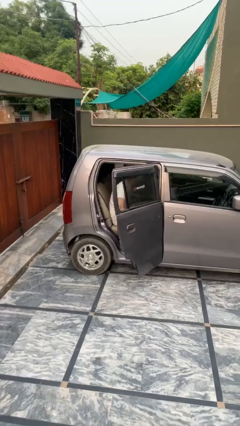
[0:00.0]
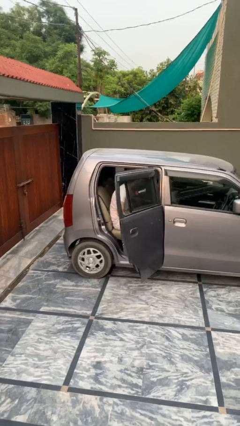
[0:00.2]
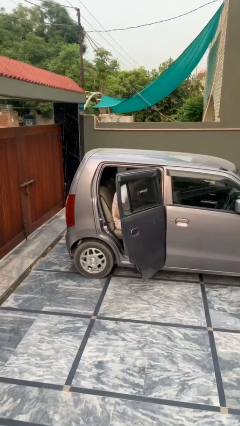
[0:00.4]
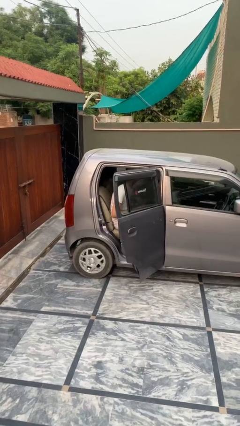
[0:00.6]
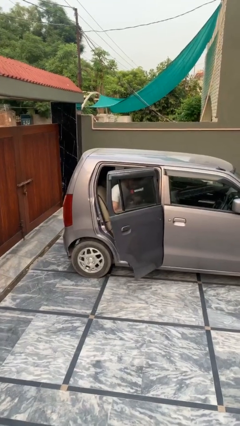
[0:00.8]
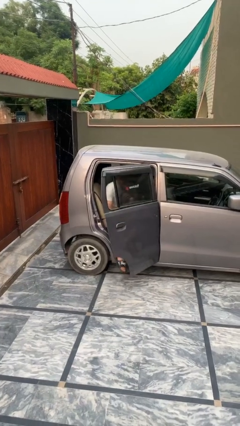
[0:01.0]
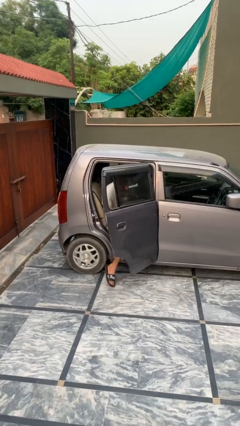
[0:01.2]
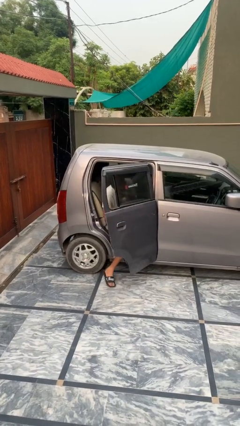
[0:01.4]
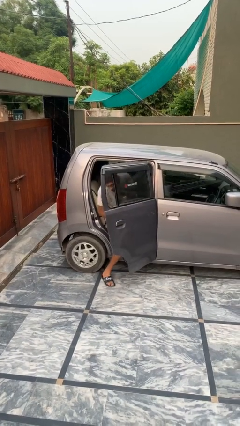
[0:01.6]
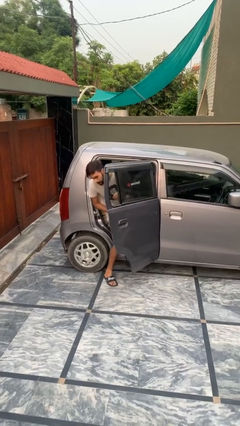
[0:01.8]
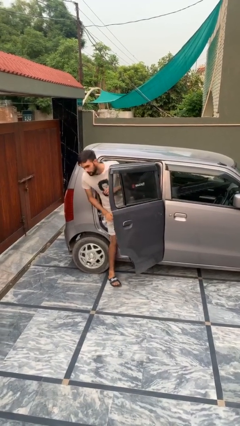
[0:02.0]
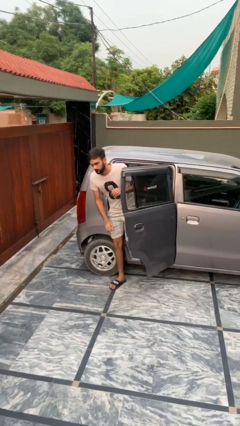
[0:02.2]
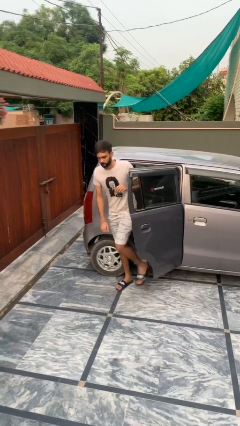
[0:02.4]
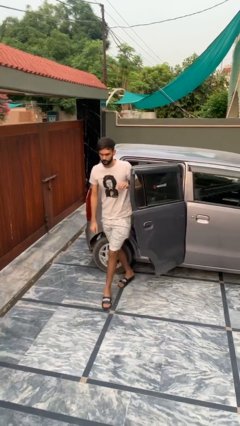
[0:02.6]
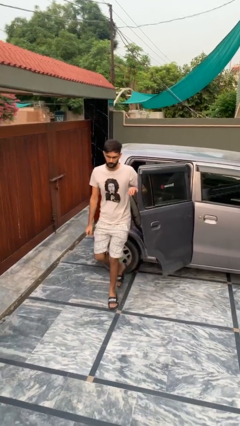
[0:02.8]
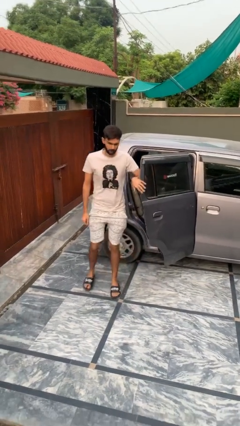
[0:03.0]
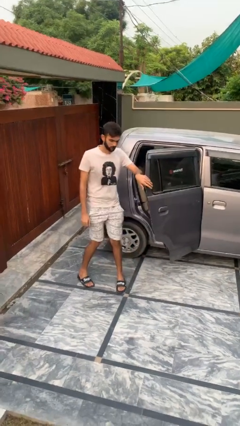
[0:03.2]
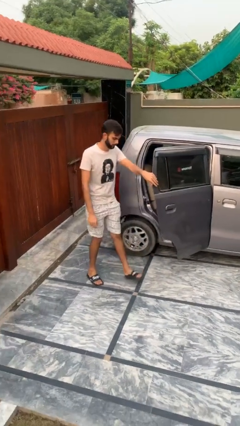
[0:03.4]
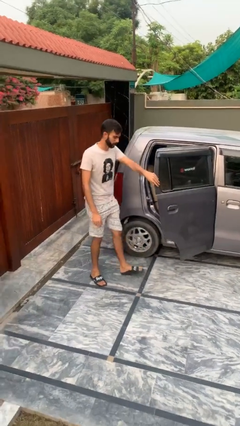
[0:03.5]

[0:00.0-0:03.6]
person exits car

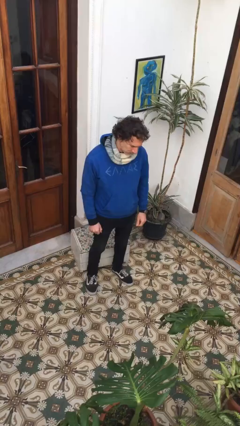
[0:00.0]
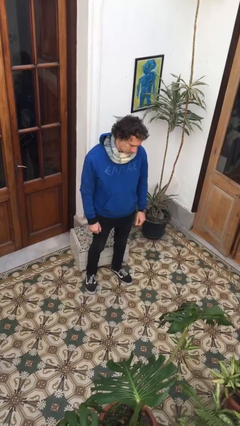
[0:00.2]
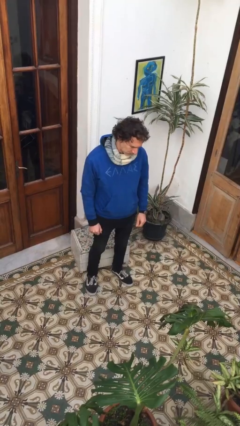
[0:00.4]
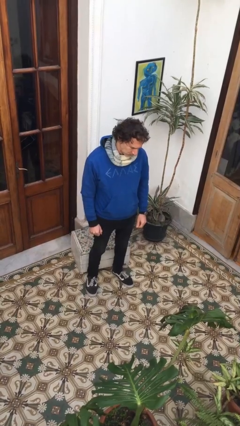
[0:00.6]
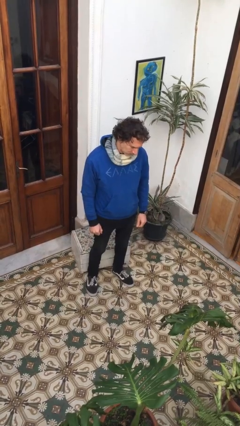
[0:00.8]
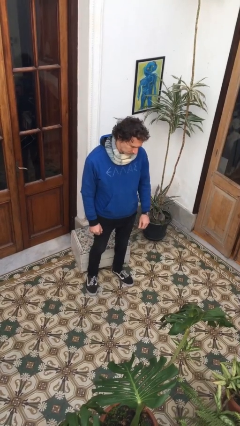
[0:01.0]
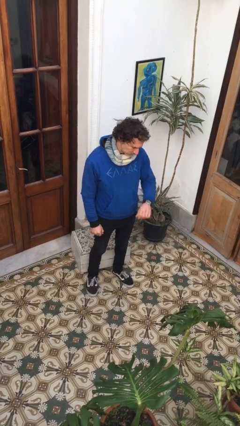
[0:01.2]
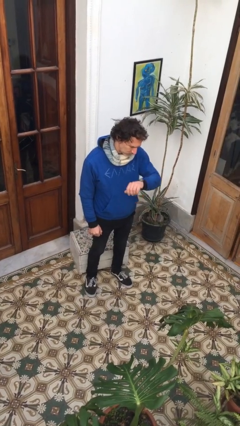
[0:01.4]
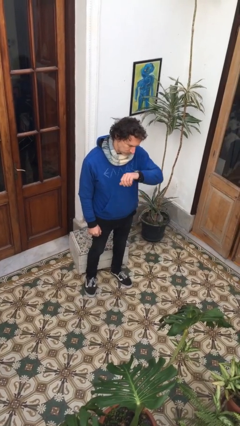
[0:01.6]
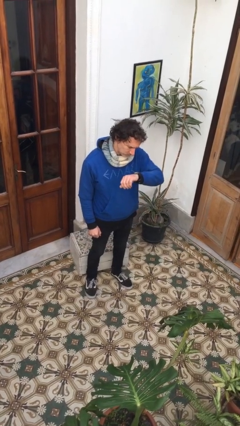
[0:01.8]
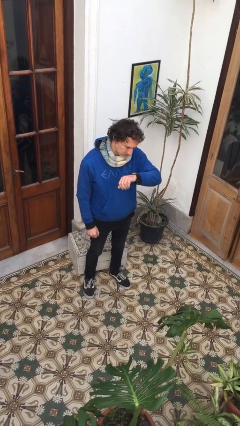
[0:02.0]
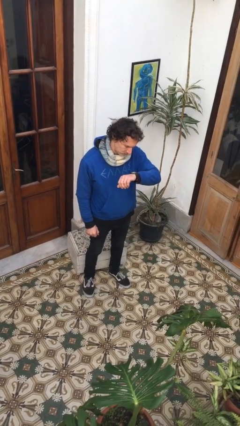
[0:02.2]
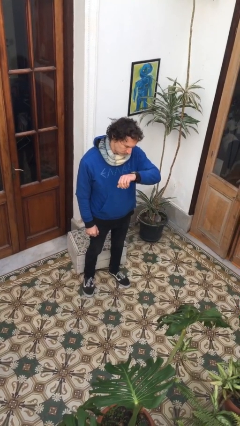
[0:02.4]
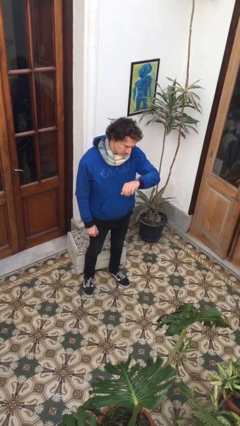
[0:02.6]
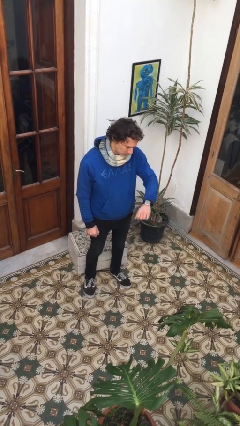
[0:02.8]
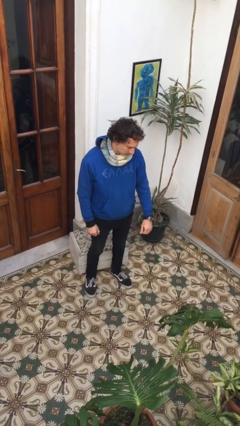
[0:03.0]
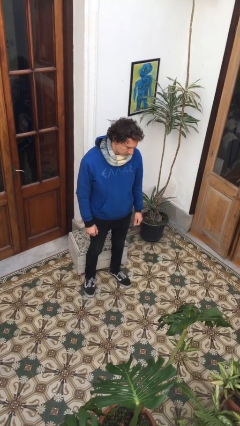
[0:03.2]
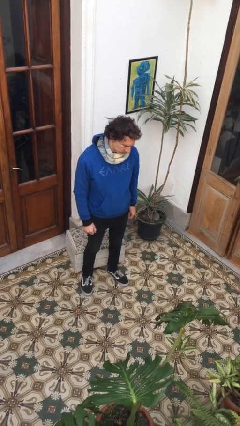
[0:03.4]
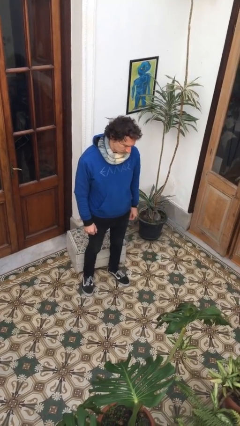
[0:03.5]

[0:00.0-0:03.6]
person looks at wristwatch

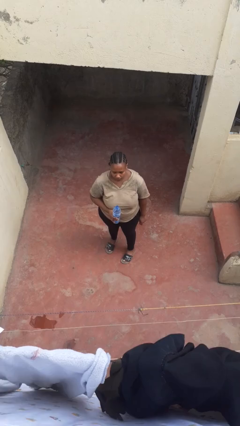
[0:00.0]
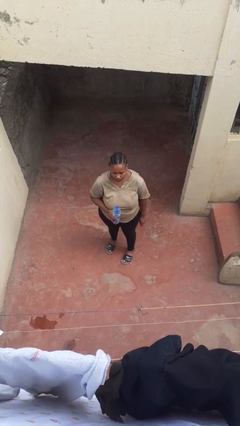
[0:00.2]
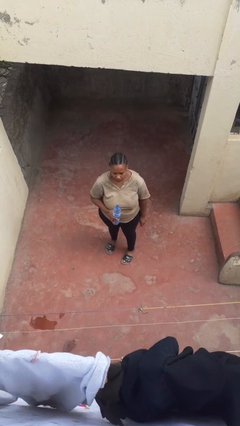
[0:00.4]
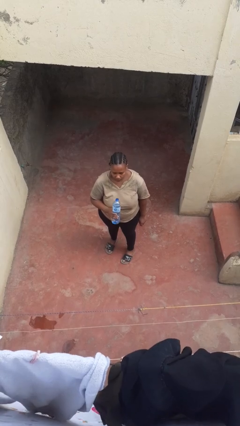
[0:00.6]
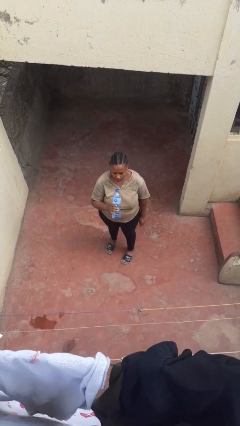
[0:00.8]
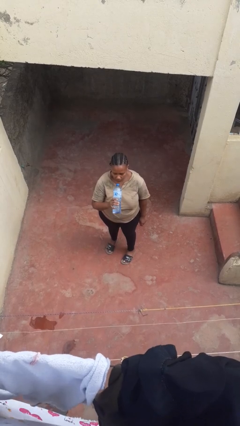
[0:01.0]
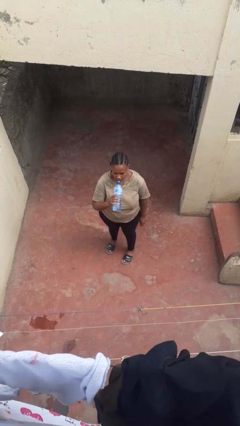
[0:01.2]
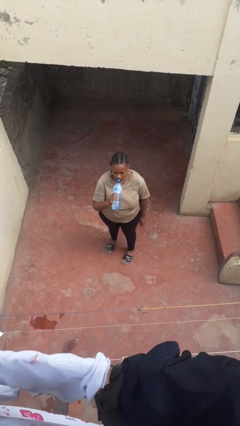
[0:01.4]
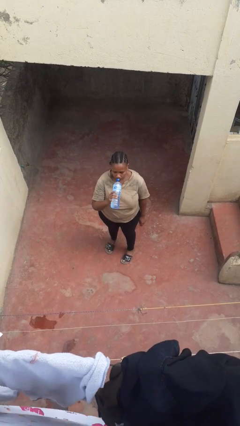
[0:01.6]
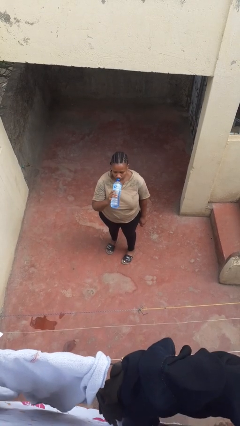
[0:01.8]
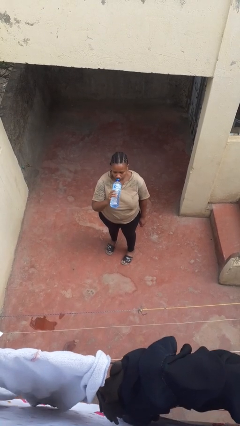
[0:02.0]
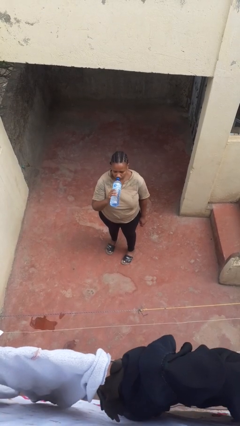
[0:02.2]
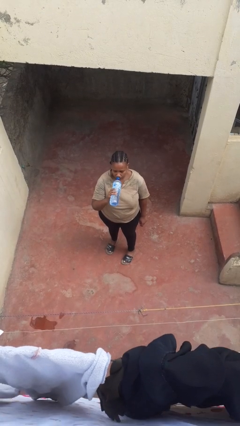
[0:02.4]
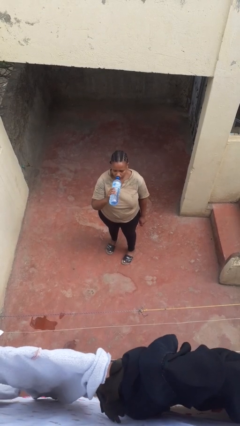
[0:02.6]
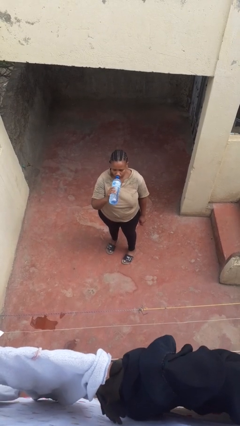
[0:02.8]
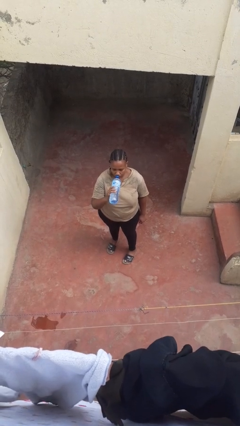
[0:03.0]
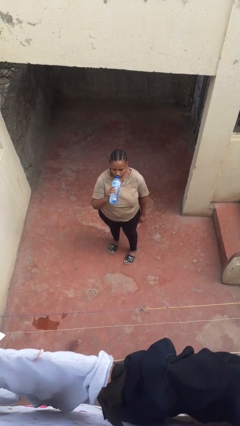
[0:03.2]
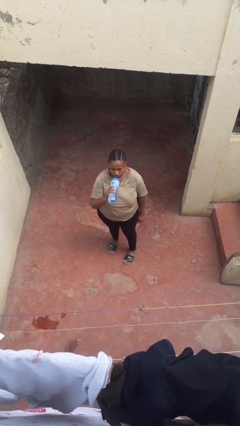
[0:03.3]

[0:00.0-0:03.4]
person drinks from bottle

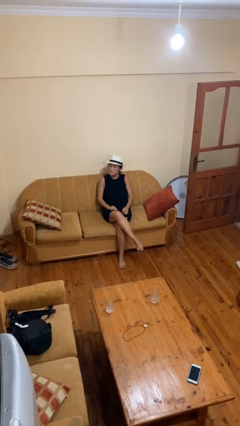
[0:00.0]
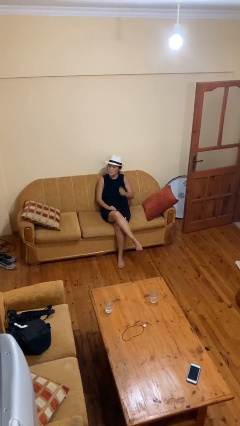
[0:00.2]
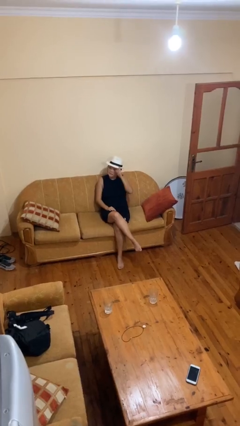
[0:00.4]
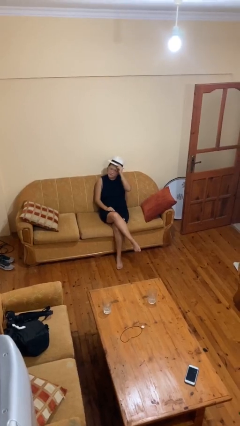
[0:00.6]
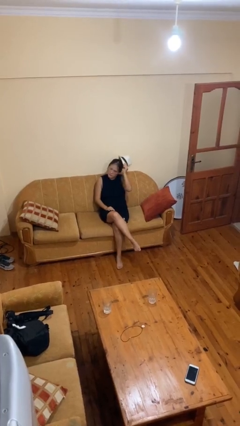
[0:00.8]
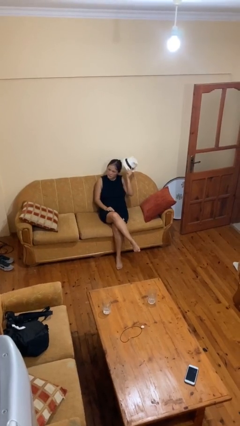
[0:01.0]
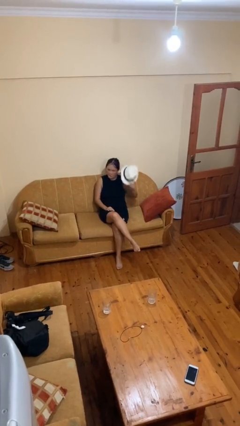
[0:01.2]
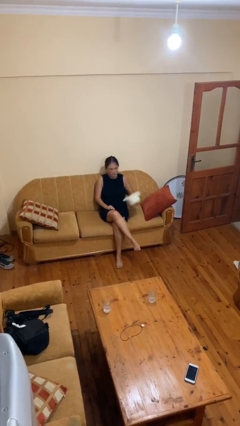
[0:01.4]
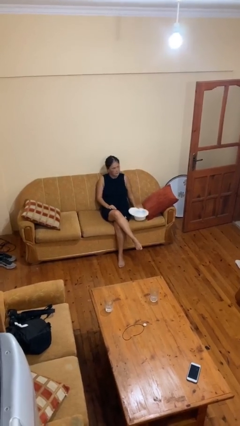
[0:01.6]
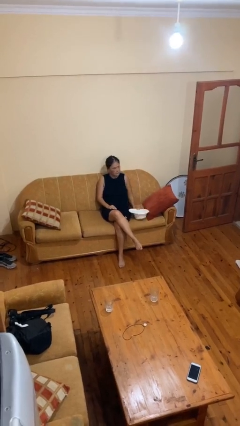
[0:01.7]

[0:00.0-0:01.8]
person takes off hat

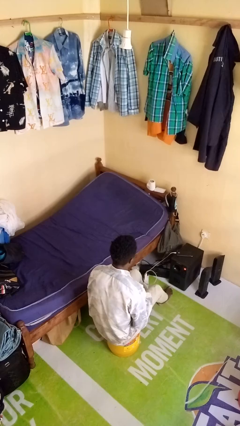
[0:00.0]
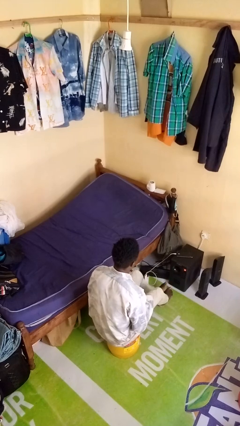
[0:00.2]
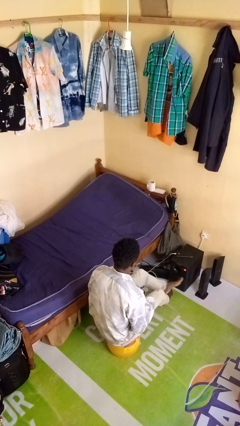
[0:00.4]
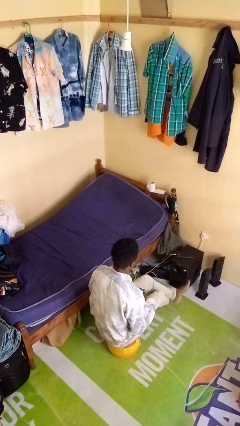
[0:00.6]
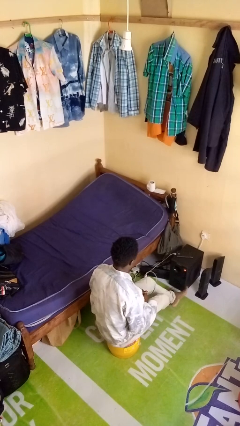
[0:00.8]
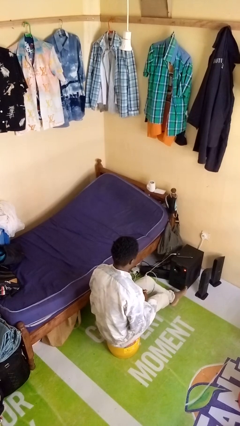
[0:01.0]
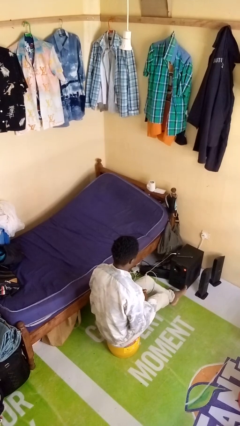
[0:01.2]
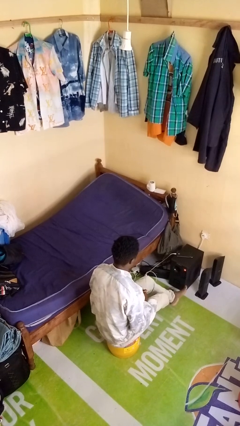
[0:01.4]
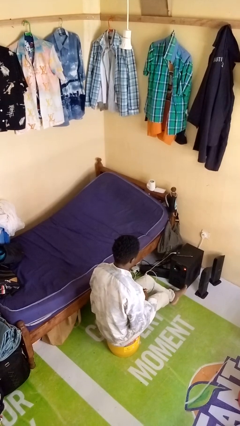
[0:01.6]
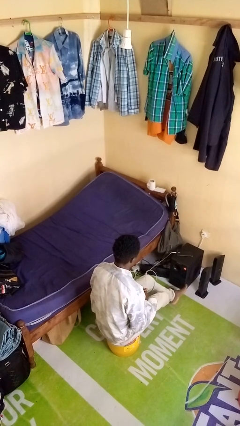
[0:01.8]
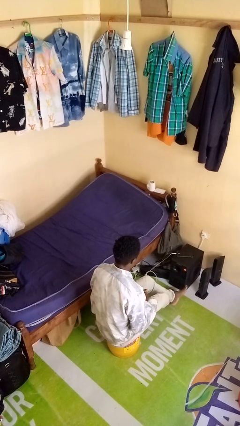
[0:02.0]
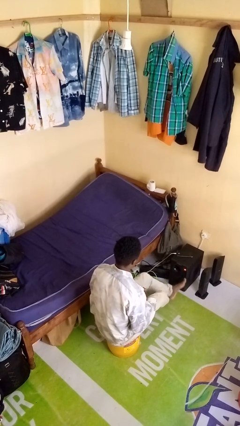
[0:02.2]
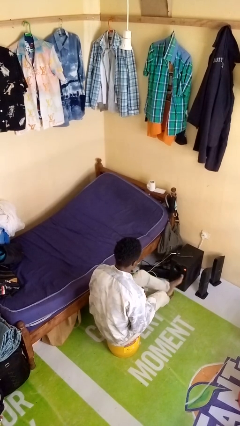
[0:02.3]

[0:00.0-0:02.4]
person crosses legs

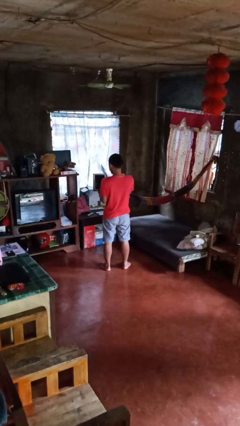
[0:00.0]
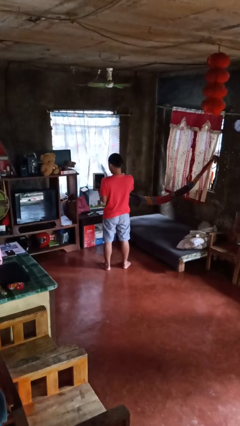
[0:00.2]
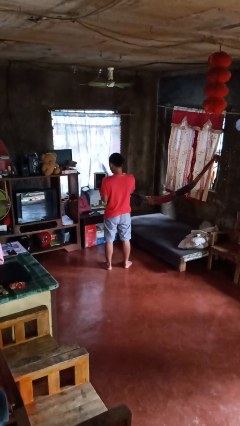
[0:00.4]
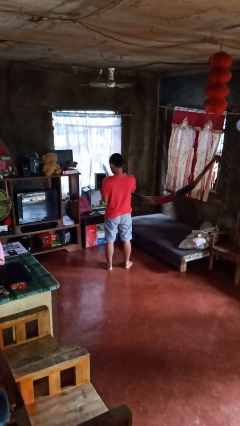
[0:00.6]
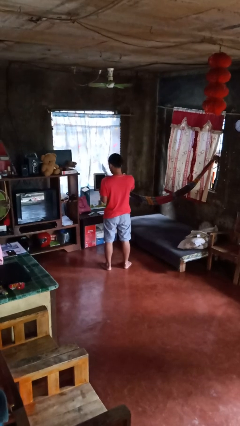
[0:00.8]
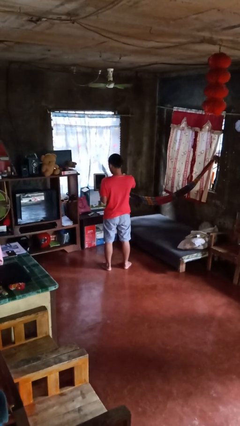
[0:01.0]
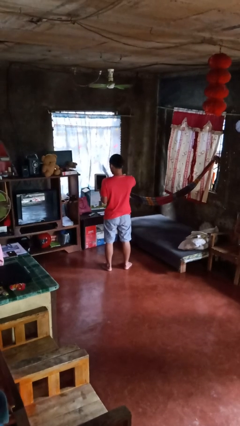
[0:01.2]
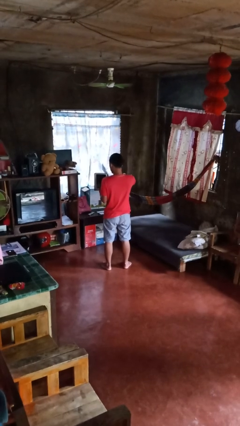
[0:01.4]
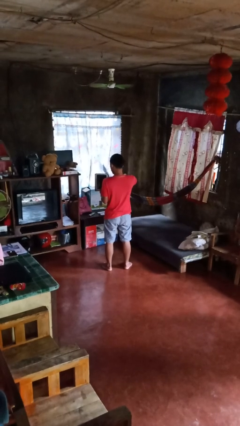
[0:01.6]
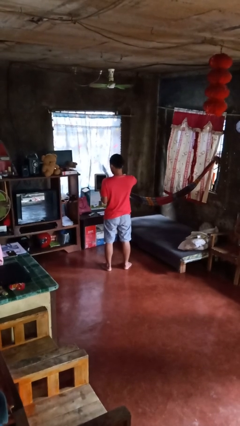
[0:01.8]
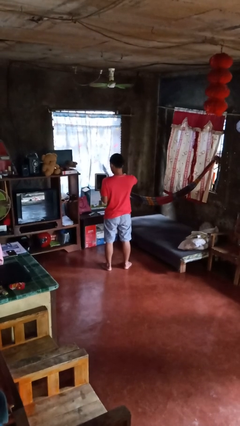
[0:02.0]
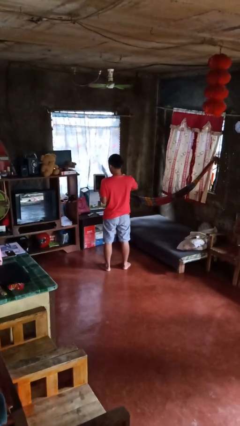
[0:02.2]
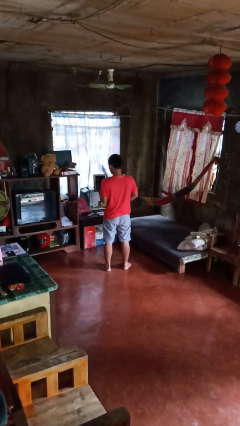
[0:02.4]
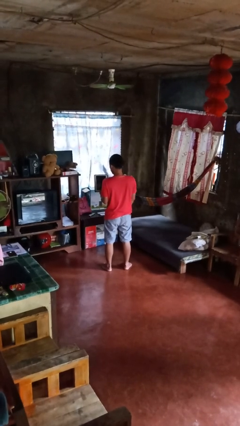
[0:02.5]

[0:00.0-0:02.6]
person interacts with tablet
